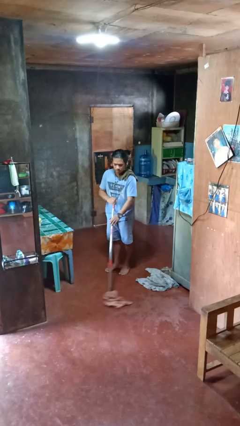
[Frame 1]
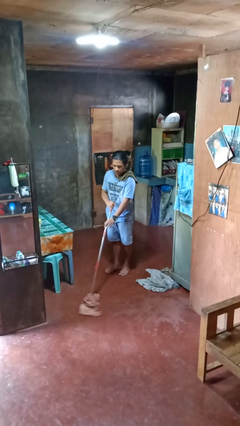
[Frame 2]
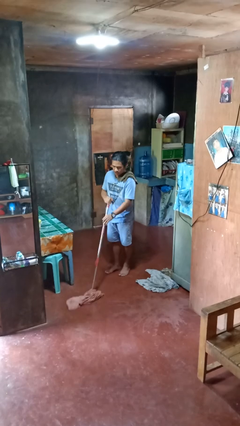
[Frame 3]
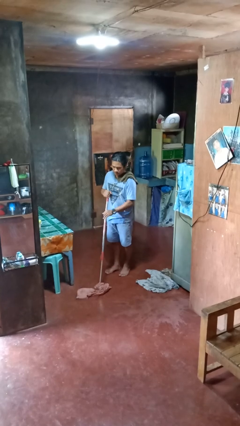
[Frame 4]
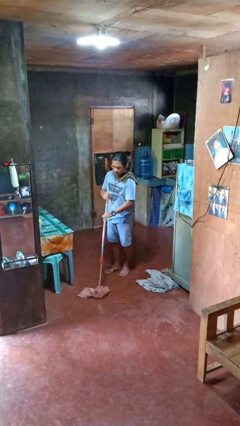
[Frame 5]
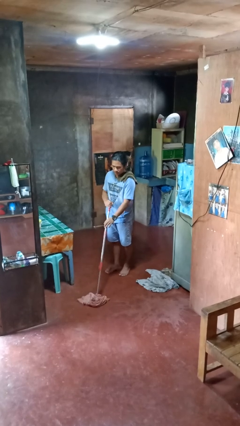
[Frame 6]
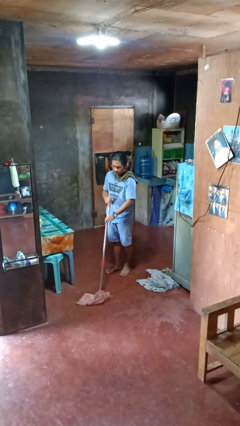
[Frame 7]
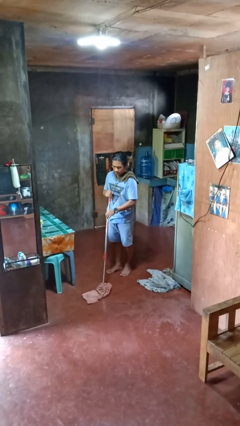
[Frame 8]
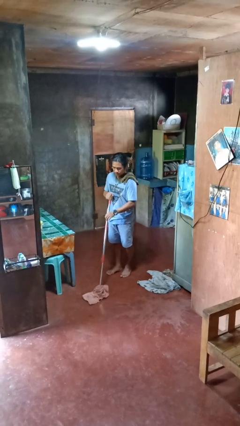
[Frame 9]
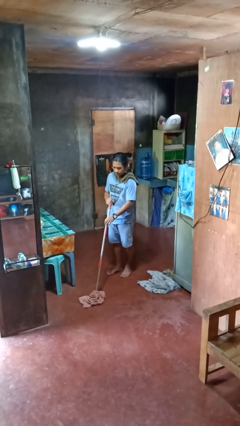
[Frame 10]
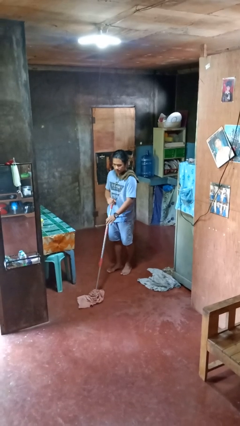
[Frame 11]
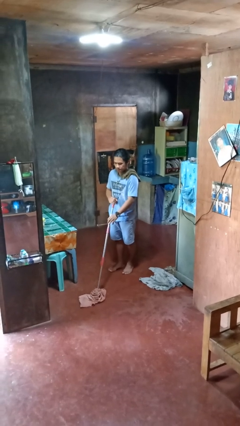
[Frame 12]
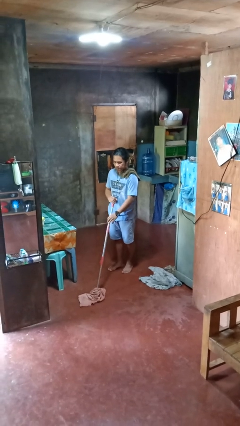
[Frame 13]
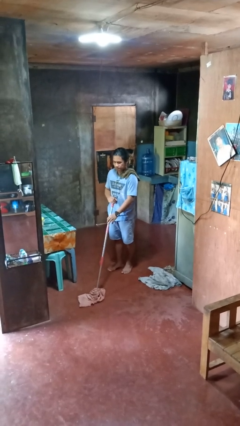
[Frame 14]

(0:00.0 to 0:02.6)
person mops

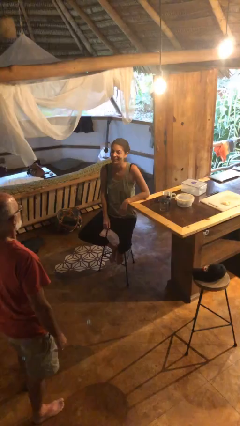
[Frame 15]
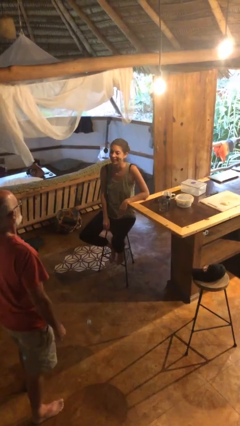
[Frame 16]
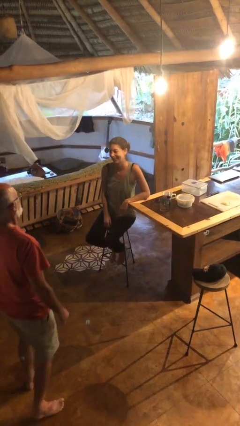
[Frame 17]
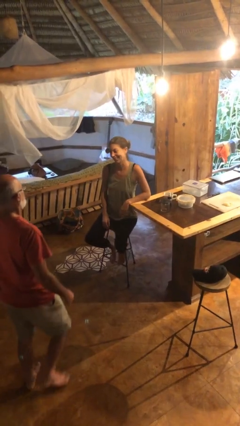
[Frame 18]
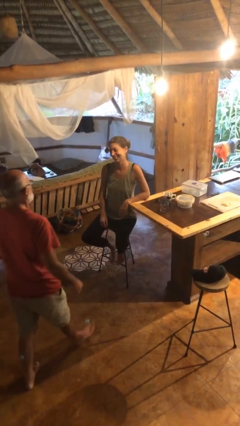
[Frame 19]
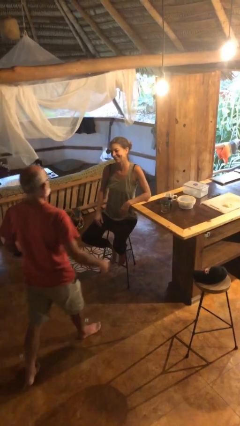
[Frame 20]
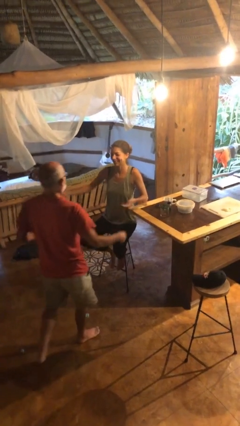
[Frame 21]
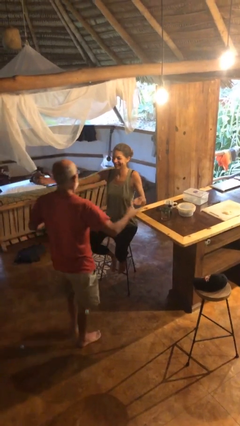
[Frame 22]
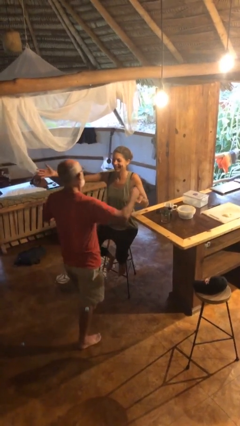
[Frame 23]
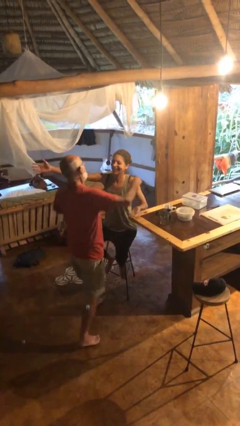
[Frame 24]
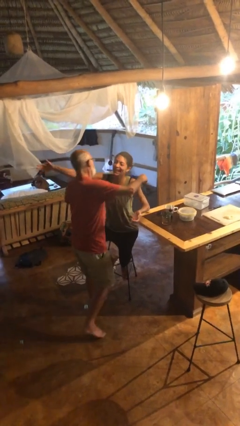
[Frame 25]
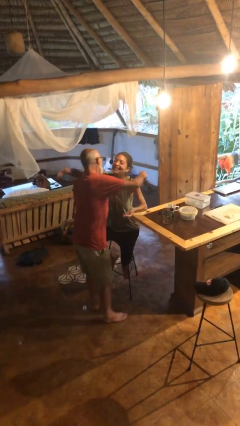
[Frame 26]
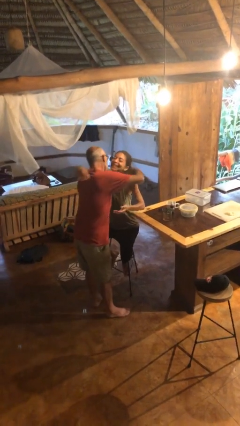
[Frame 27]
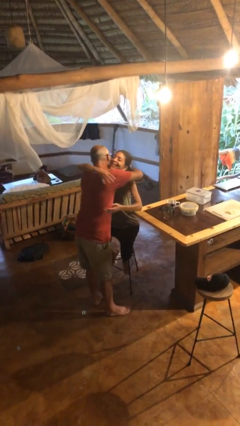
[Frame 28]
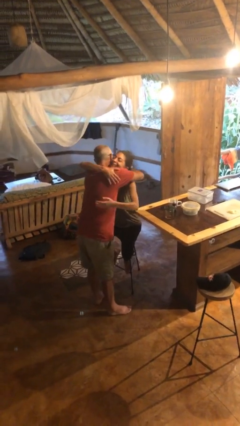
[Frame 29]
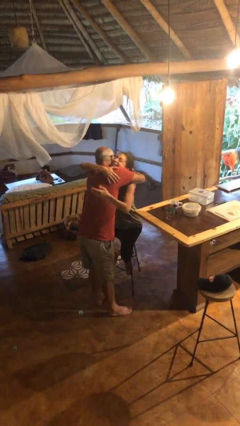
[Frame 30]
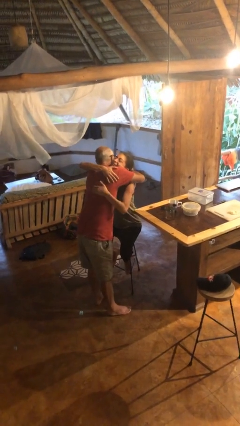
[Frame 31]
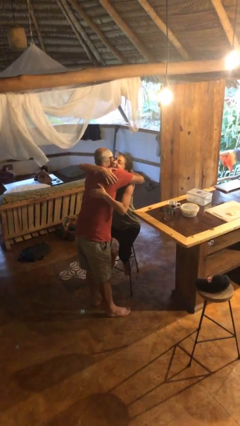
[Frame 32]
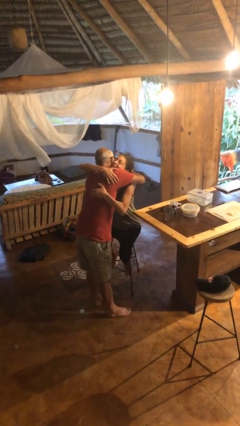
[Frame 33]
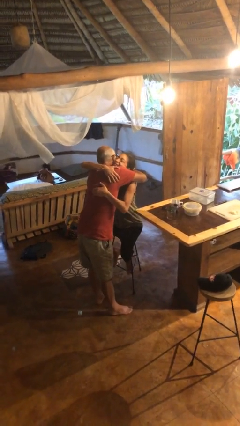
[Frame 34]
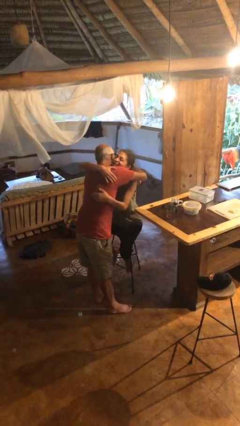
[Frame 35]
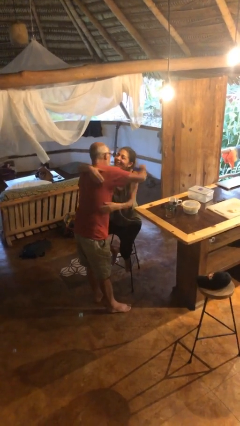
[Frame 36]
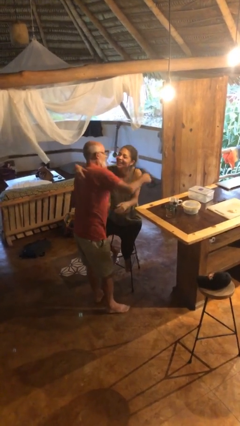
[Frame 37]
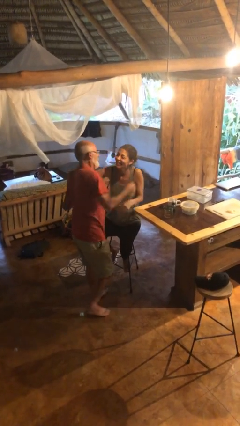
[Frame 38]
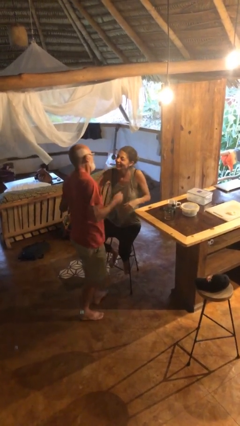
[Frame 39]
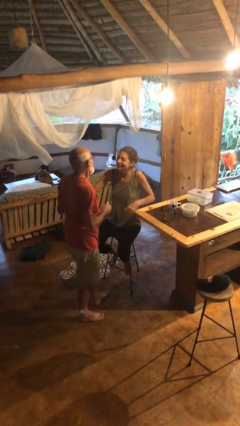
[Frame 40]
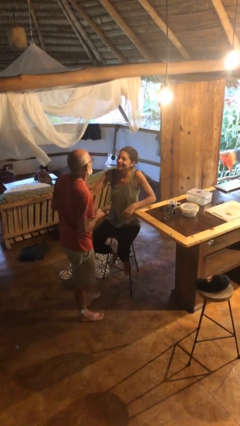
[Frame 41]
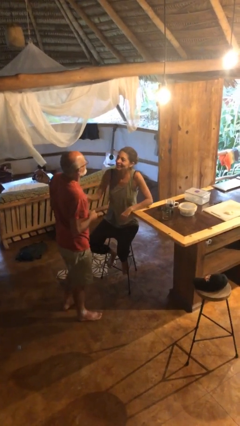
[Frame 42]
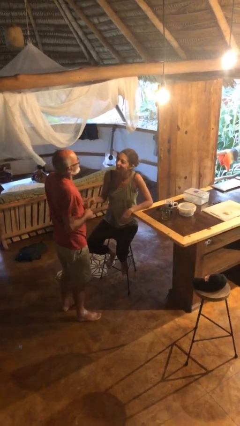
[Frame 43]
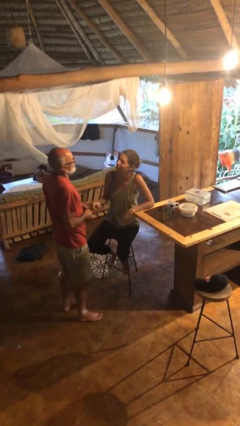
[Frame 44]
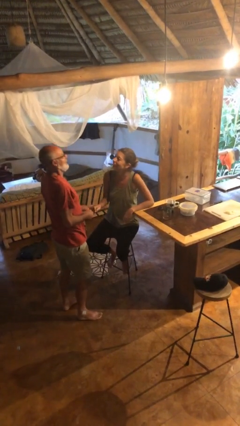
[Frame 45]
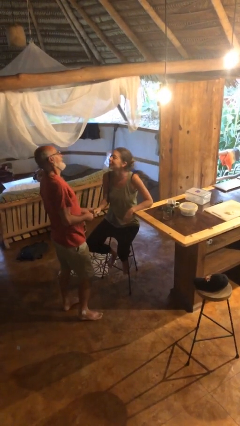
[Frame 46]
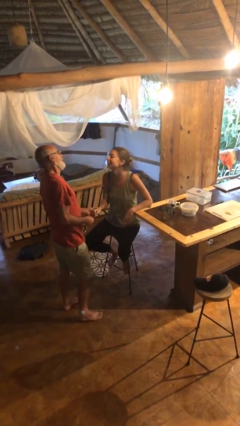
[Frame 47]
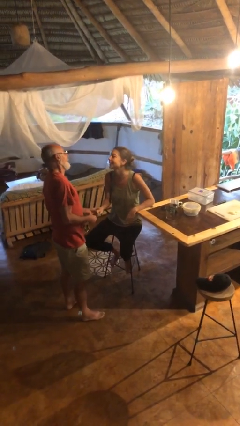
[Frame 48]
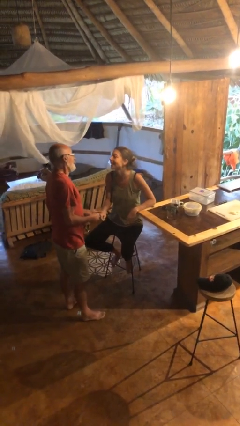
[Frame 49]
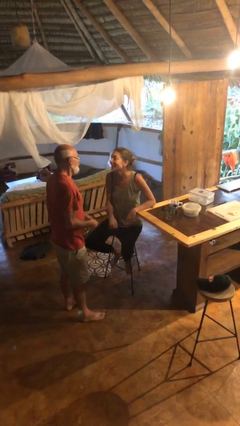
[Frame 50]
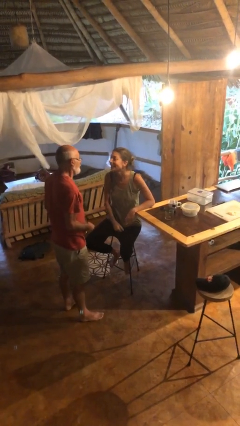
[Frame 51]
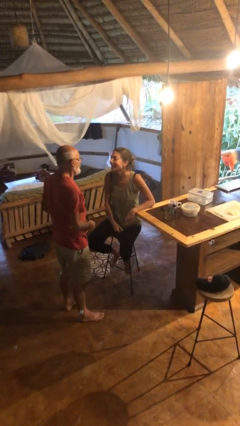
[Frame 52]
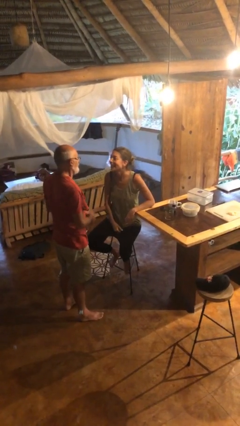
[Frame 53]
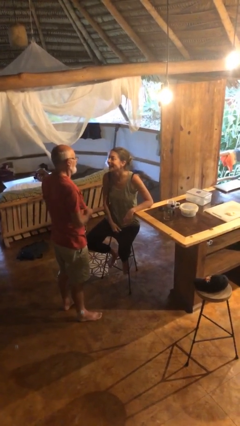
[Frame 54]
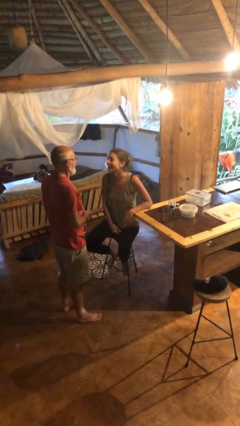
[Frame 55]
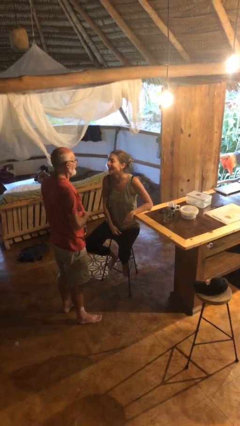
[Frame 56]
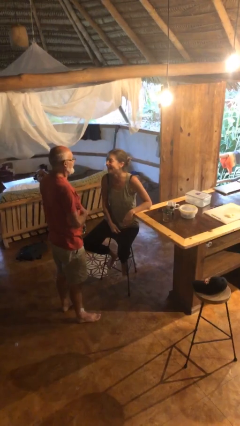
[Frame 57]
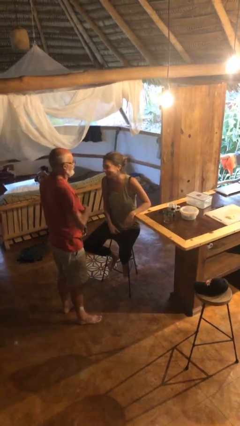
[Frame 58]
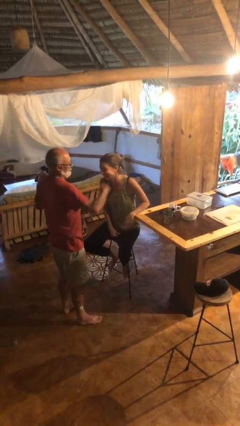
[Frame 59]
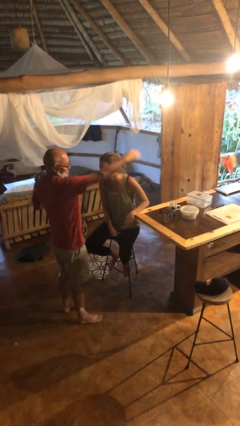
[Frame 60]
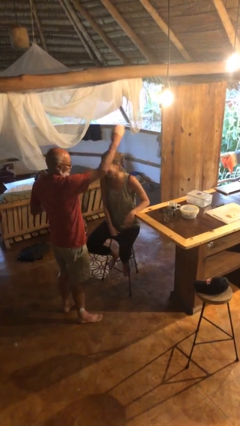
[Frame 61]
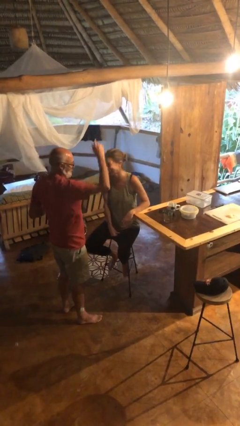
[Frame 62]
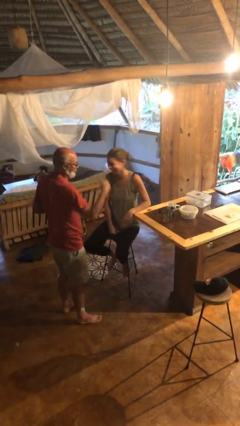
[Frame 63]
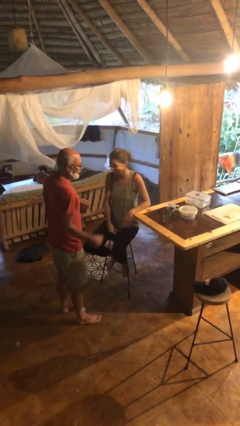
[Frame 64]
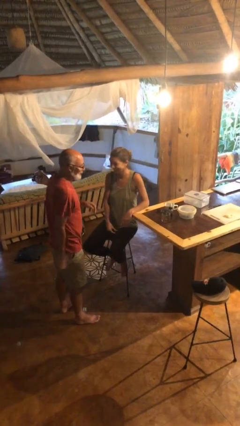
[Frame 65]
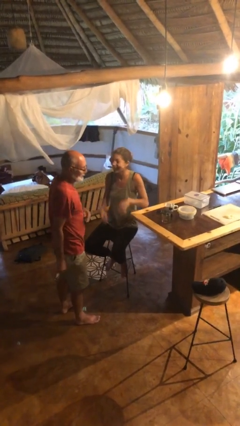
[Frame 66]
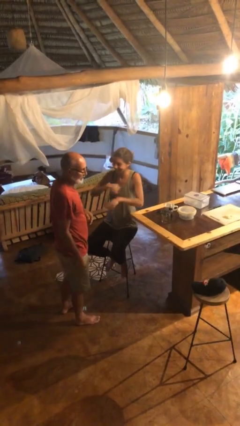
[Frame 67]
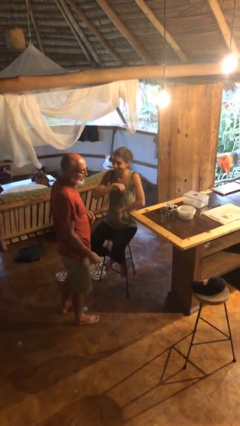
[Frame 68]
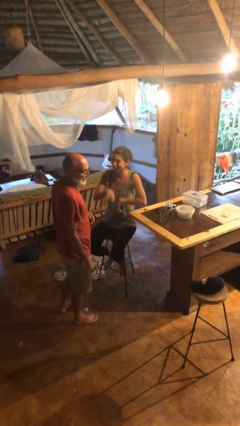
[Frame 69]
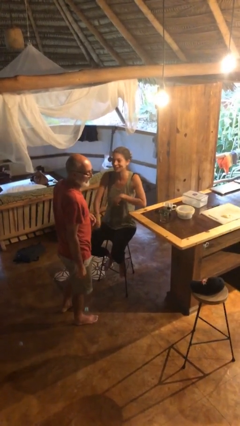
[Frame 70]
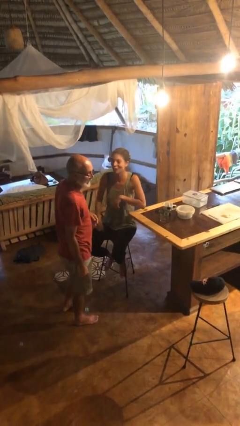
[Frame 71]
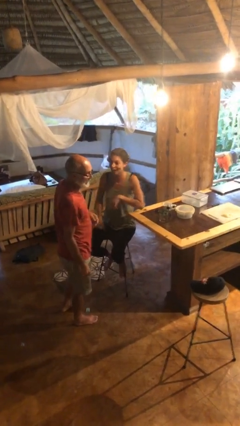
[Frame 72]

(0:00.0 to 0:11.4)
person embraces person

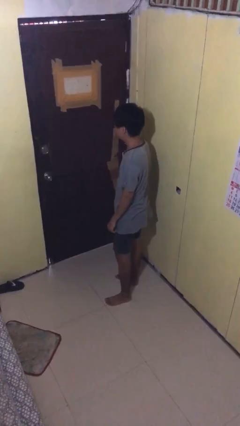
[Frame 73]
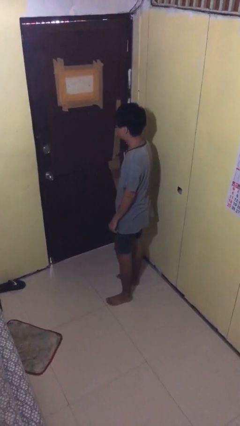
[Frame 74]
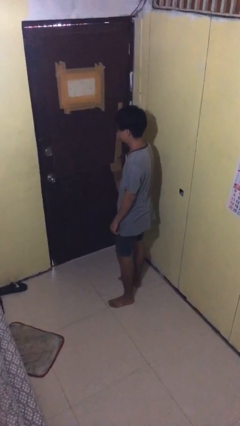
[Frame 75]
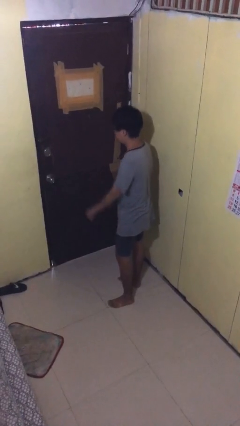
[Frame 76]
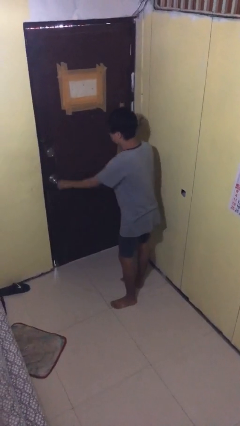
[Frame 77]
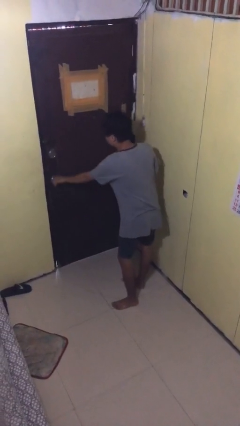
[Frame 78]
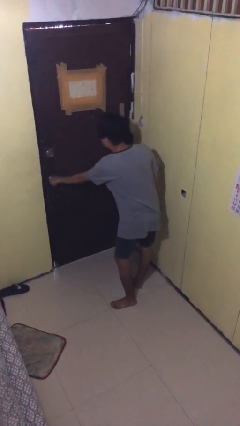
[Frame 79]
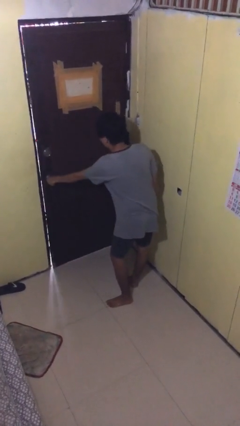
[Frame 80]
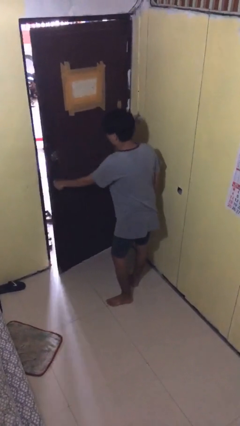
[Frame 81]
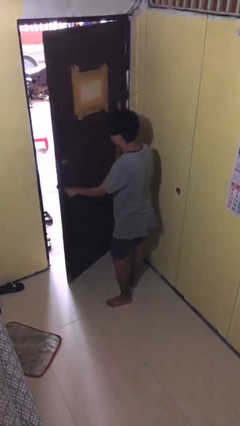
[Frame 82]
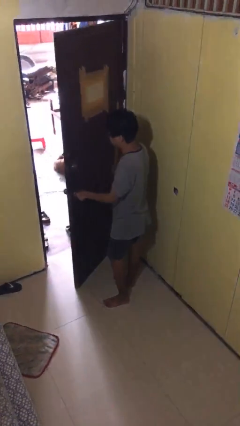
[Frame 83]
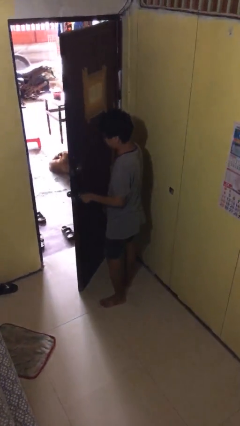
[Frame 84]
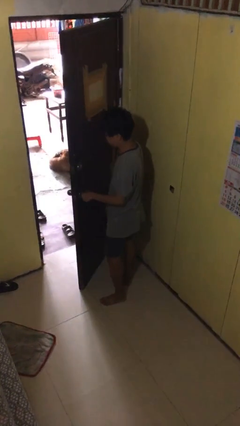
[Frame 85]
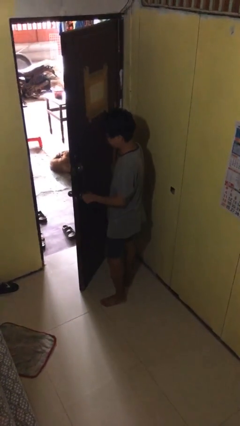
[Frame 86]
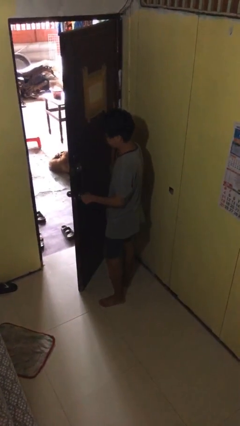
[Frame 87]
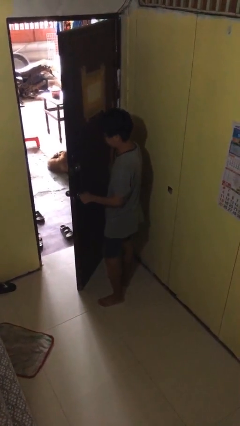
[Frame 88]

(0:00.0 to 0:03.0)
person opens facility door

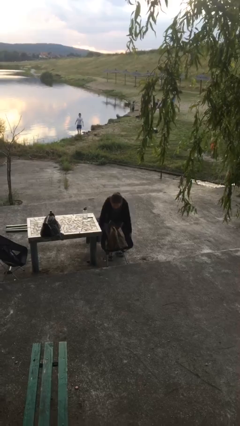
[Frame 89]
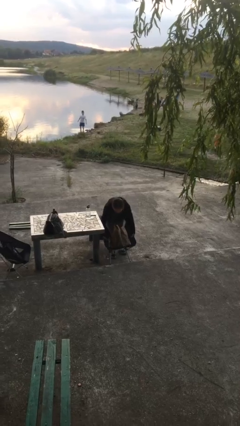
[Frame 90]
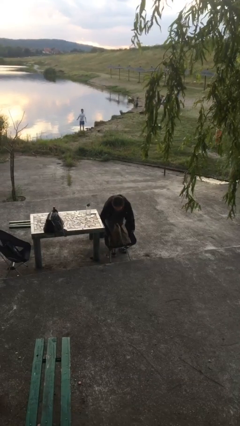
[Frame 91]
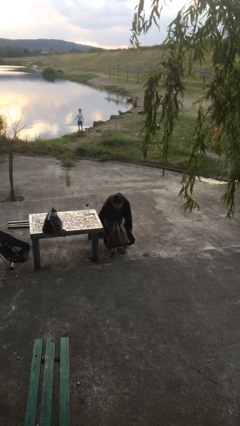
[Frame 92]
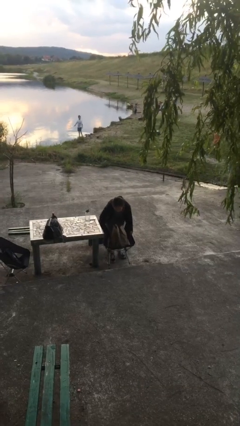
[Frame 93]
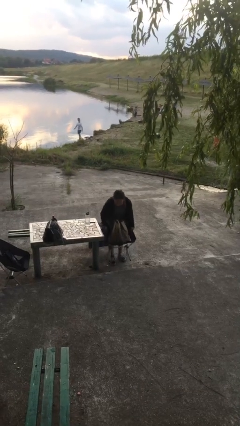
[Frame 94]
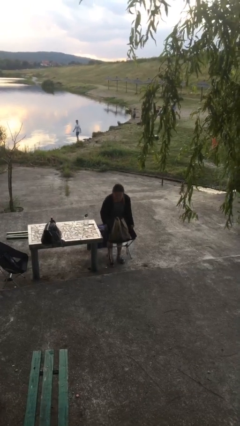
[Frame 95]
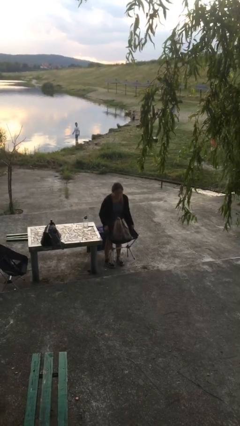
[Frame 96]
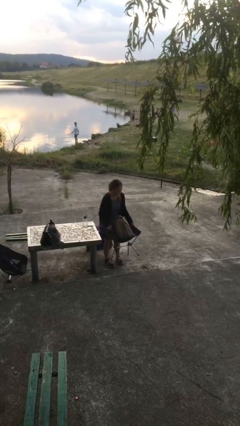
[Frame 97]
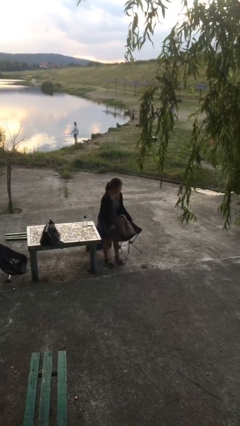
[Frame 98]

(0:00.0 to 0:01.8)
person picks up object from floor
